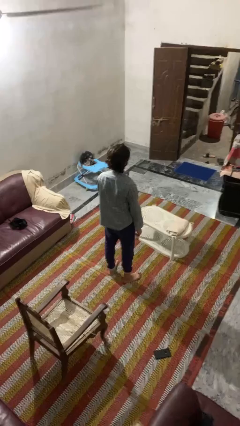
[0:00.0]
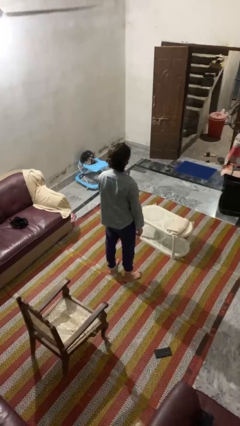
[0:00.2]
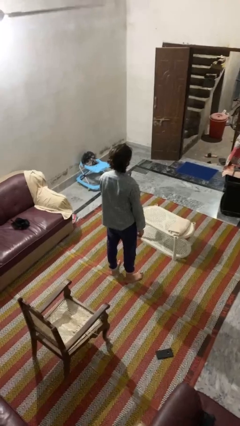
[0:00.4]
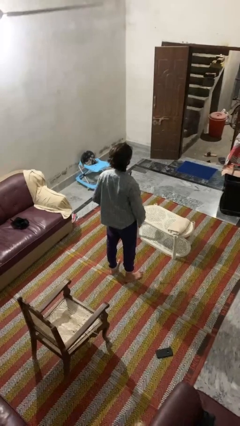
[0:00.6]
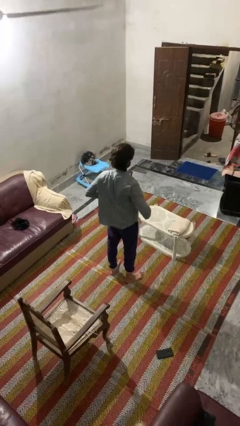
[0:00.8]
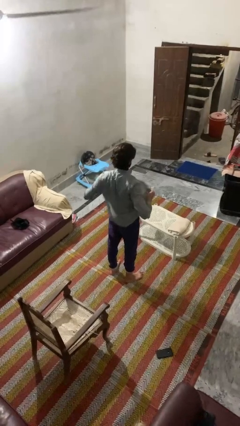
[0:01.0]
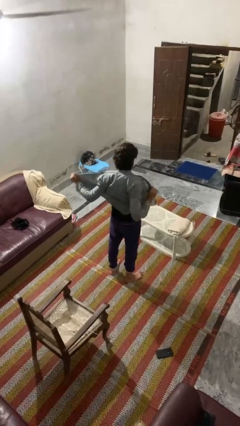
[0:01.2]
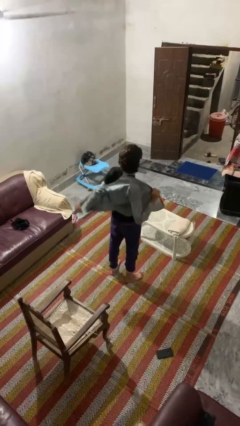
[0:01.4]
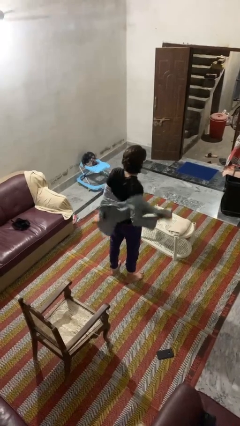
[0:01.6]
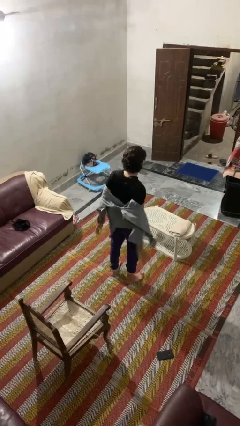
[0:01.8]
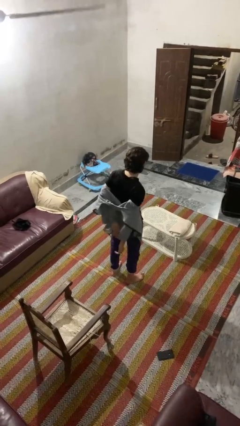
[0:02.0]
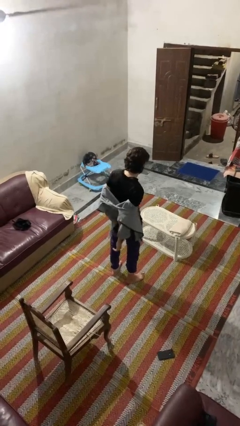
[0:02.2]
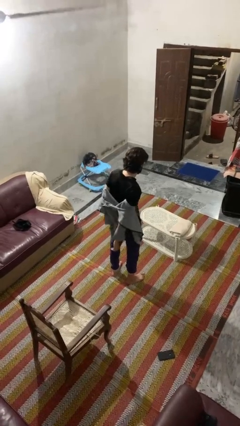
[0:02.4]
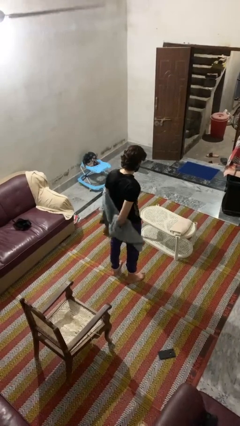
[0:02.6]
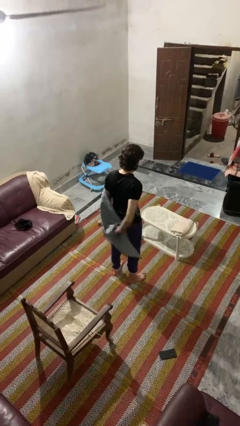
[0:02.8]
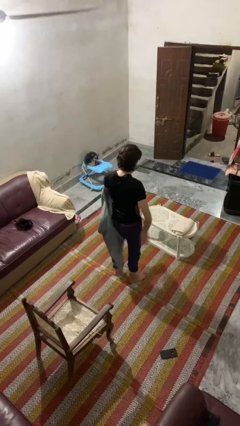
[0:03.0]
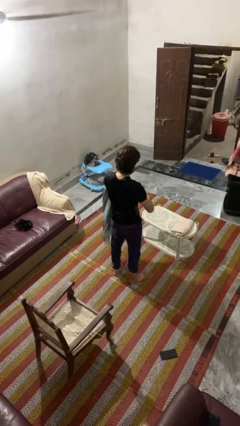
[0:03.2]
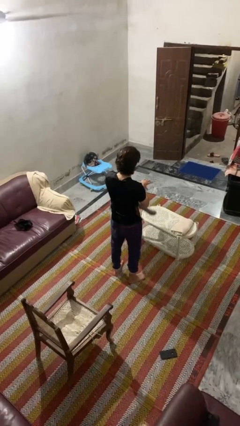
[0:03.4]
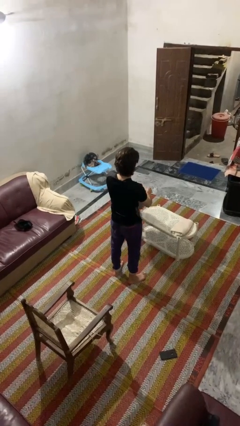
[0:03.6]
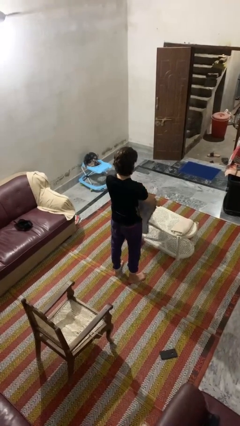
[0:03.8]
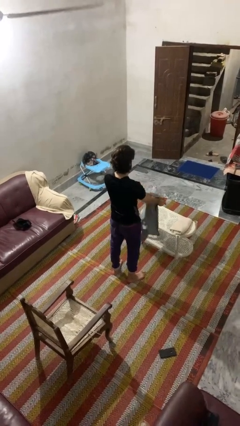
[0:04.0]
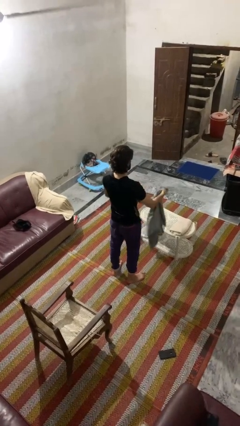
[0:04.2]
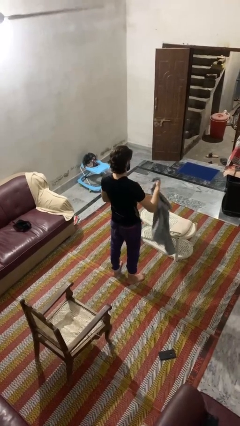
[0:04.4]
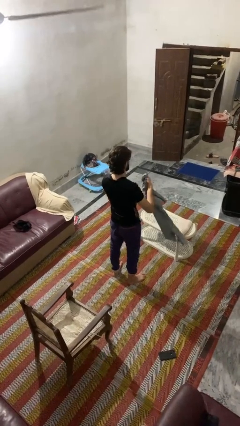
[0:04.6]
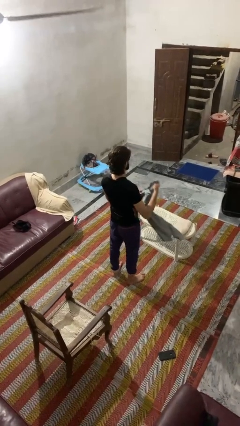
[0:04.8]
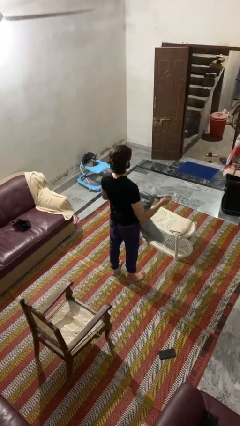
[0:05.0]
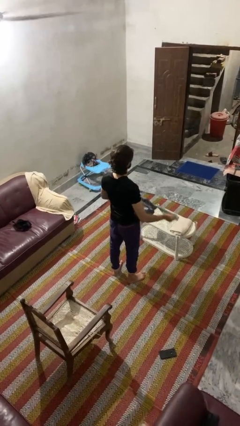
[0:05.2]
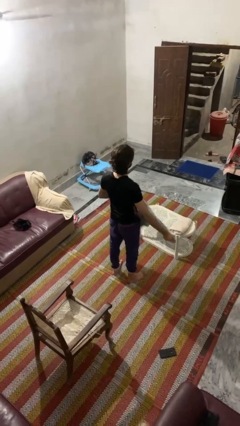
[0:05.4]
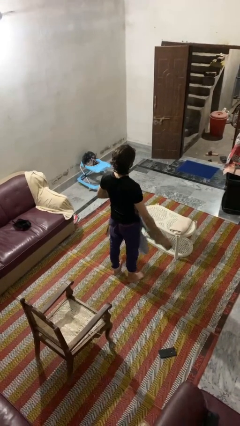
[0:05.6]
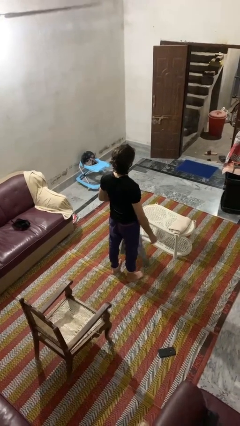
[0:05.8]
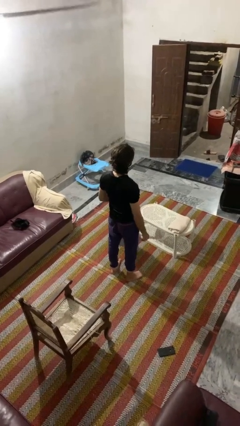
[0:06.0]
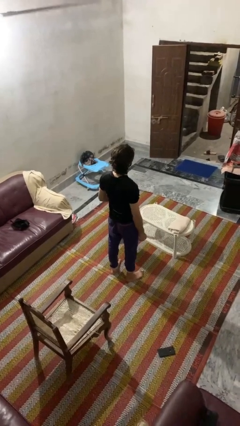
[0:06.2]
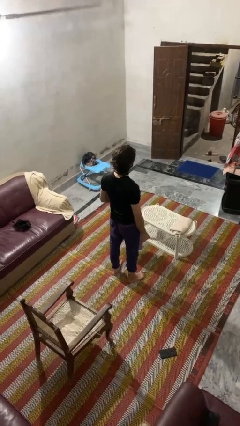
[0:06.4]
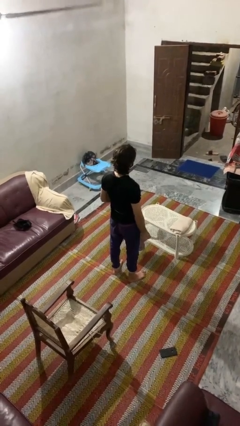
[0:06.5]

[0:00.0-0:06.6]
person takes off shirt

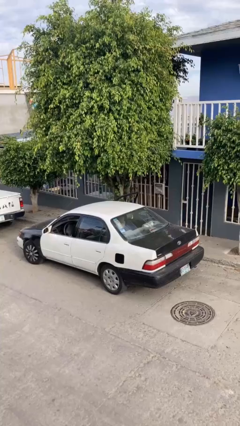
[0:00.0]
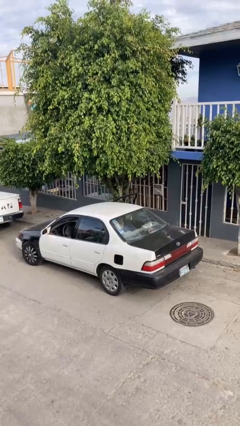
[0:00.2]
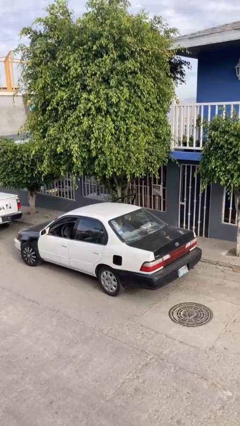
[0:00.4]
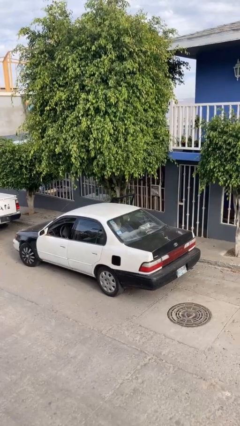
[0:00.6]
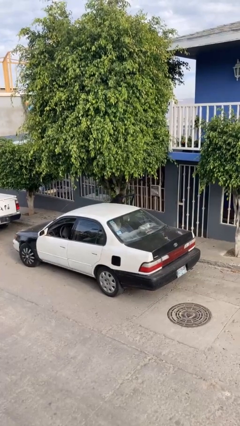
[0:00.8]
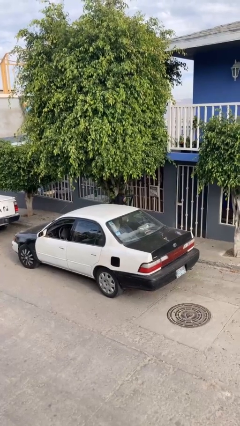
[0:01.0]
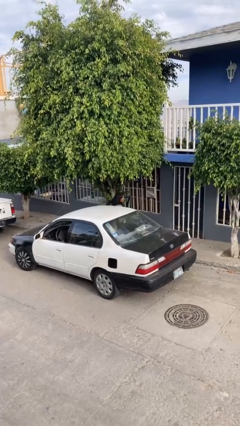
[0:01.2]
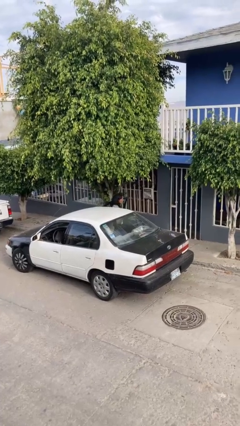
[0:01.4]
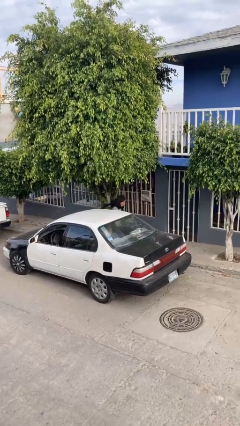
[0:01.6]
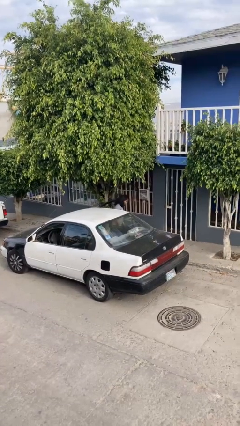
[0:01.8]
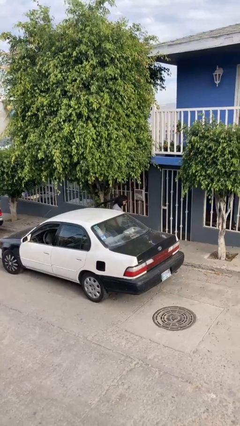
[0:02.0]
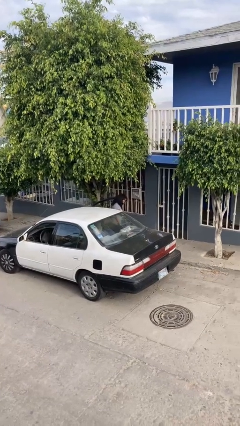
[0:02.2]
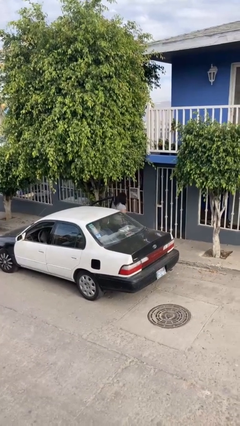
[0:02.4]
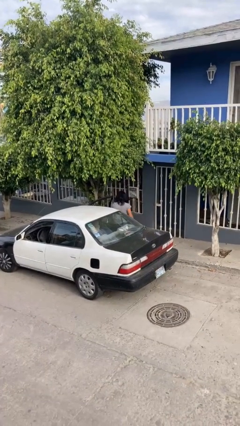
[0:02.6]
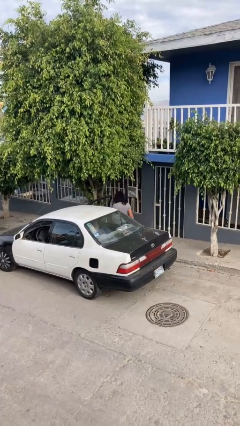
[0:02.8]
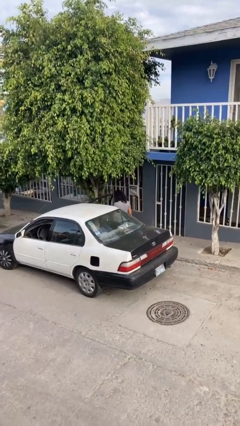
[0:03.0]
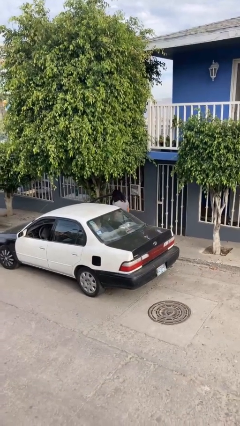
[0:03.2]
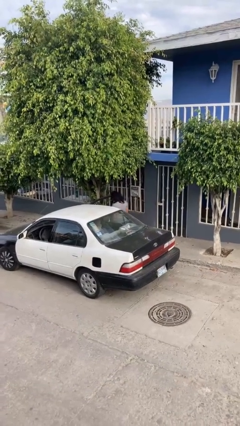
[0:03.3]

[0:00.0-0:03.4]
person exits car

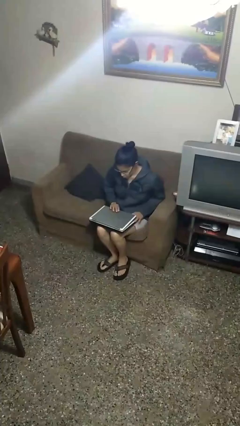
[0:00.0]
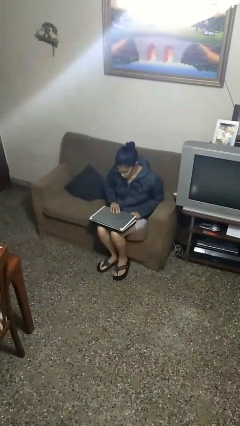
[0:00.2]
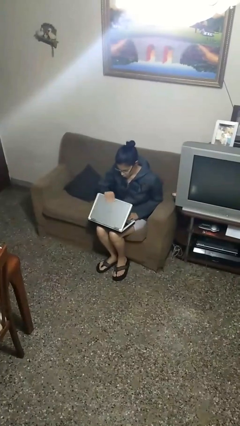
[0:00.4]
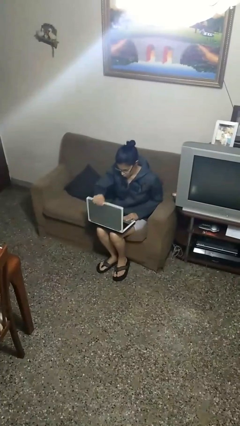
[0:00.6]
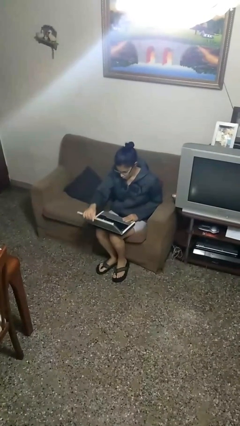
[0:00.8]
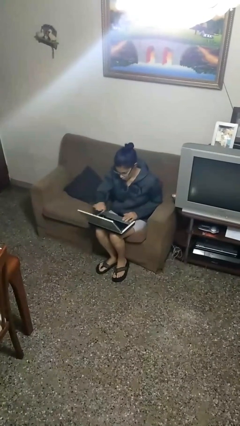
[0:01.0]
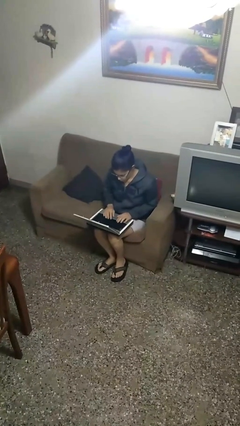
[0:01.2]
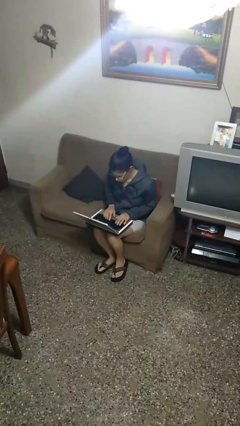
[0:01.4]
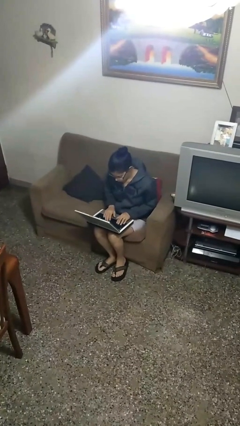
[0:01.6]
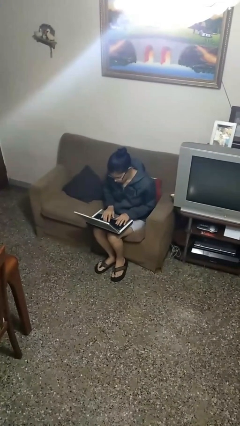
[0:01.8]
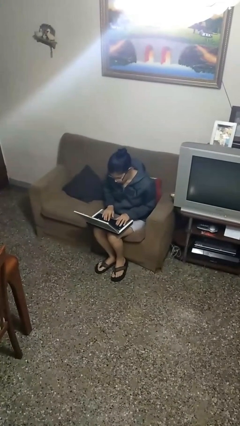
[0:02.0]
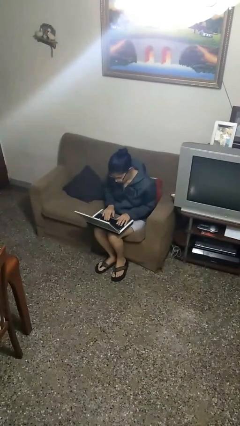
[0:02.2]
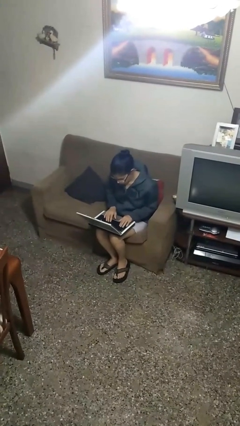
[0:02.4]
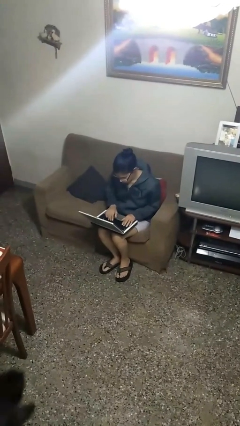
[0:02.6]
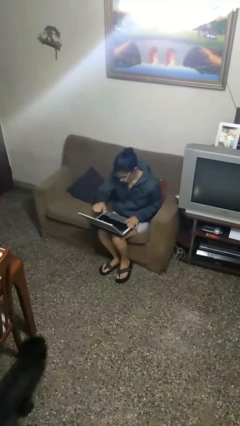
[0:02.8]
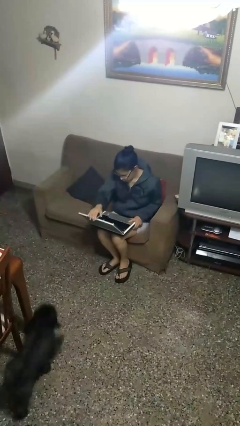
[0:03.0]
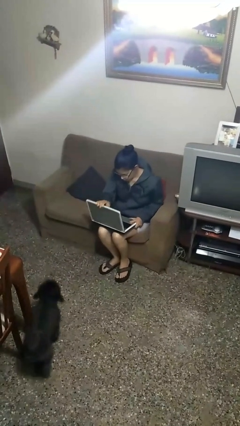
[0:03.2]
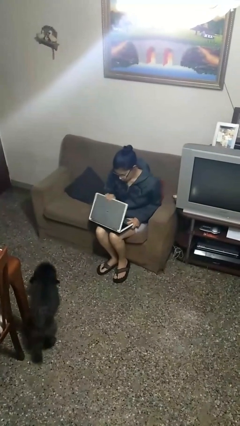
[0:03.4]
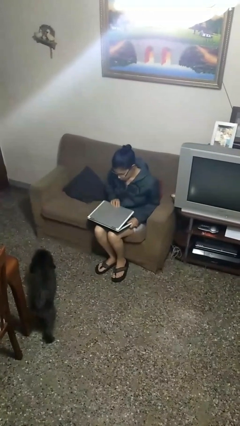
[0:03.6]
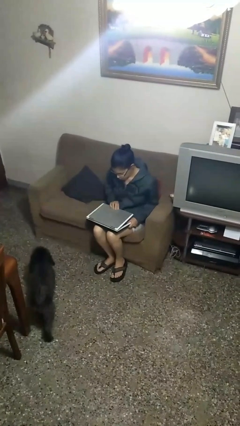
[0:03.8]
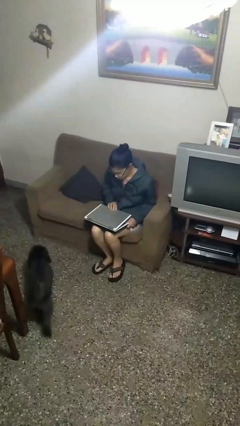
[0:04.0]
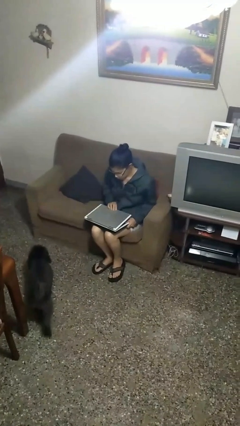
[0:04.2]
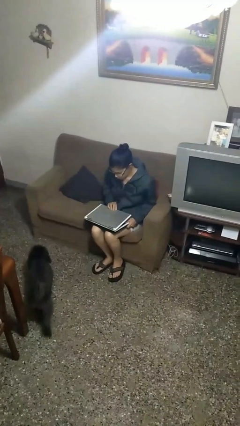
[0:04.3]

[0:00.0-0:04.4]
person interacts with laptop

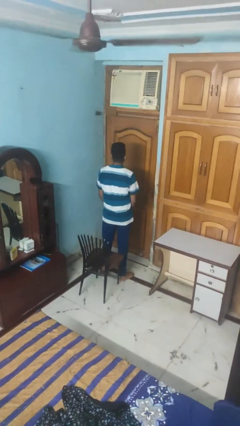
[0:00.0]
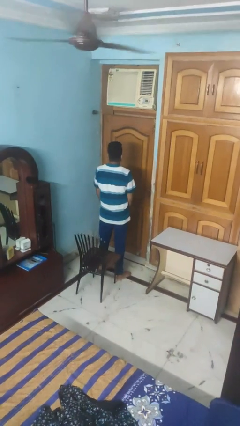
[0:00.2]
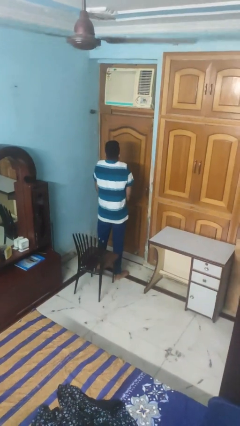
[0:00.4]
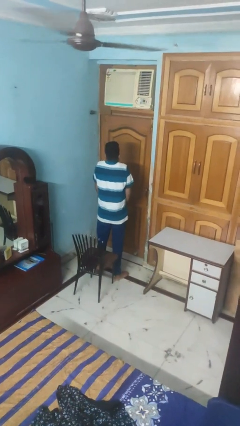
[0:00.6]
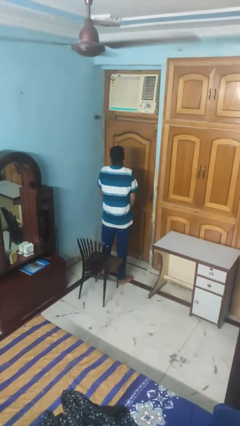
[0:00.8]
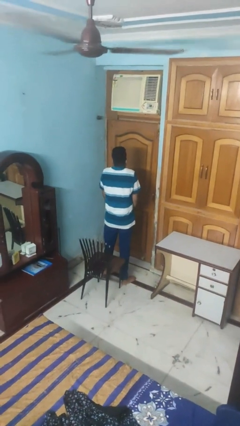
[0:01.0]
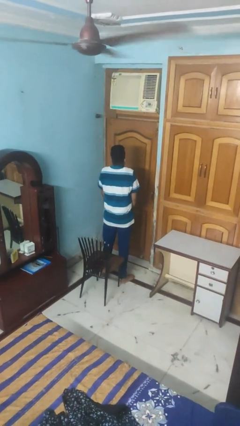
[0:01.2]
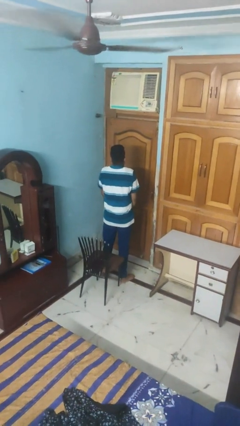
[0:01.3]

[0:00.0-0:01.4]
person shrugs

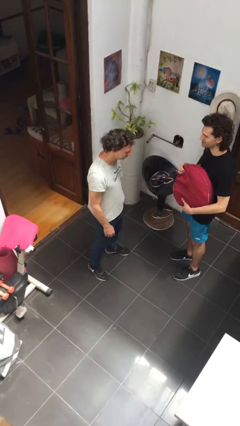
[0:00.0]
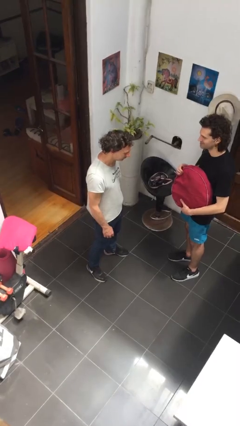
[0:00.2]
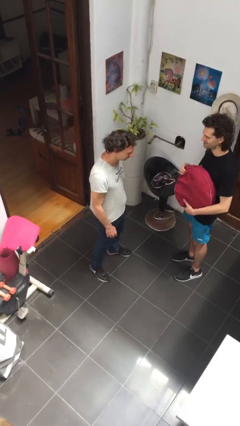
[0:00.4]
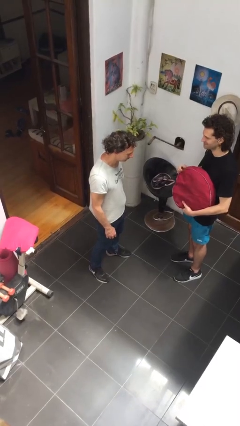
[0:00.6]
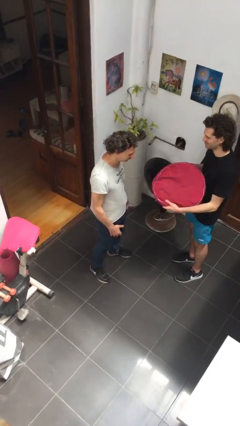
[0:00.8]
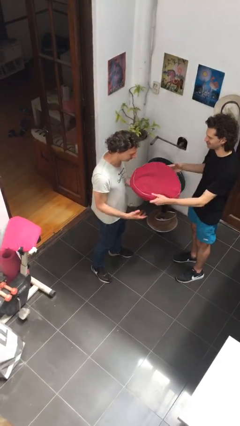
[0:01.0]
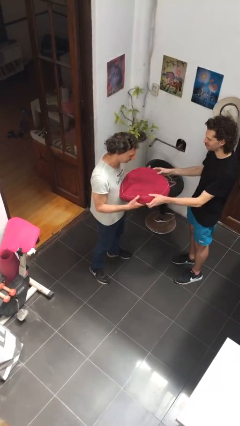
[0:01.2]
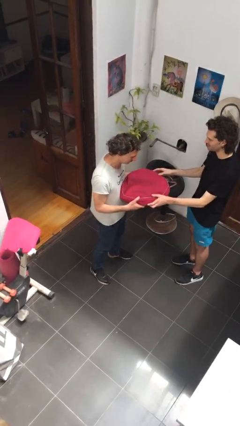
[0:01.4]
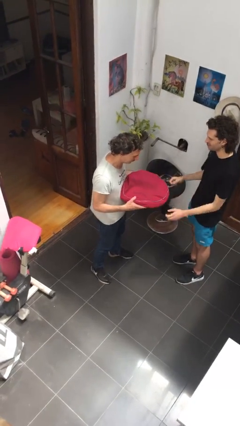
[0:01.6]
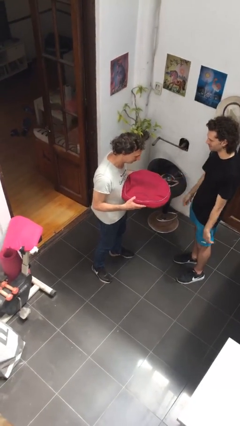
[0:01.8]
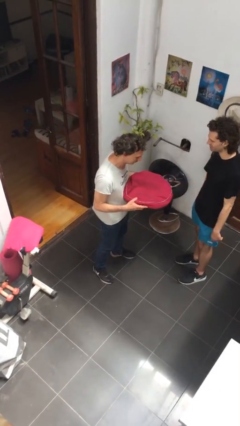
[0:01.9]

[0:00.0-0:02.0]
person transfers object to person
